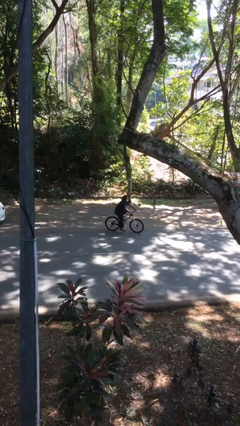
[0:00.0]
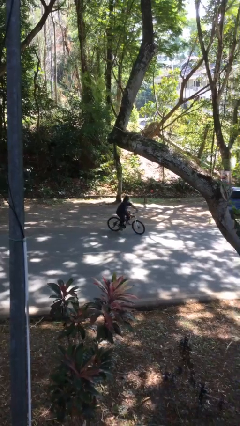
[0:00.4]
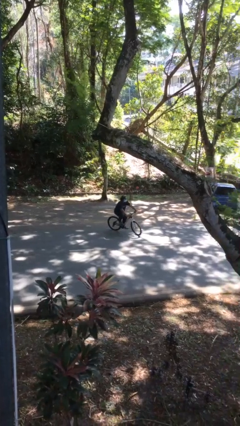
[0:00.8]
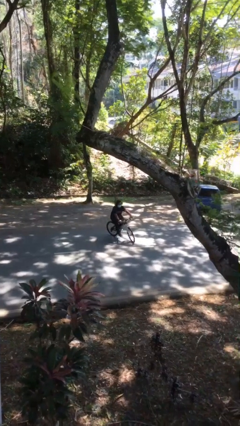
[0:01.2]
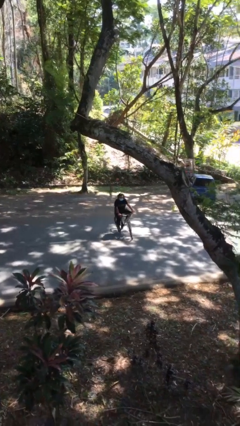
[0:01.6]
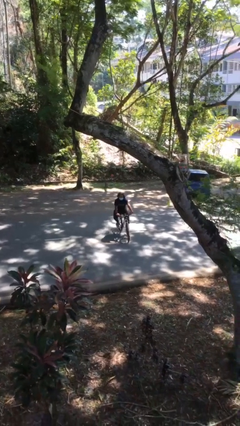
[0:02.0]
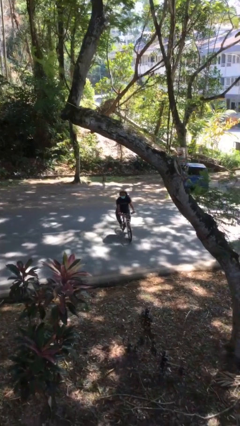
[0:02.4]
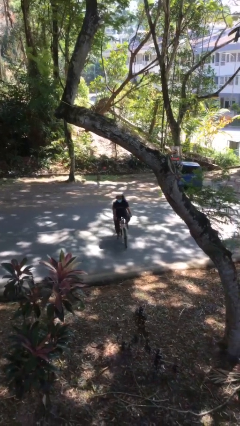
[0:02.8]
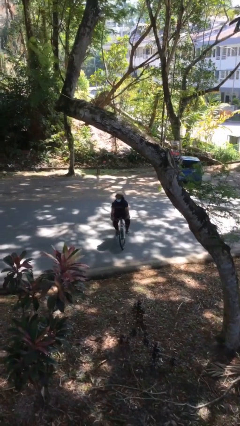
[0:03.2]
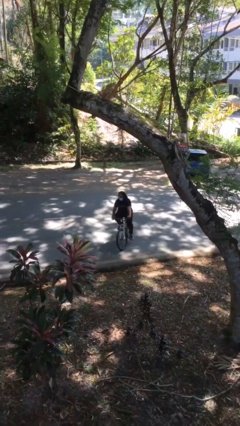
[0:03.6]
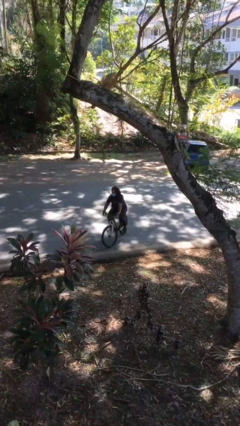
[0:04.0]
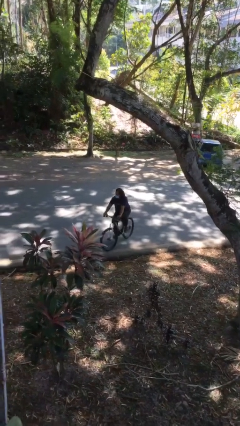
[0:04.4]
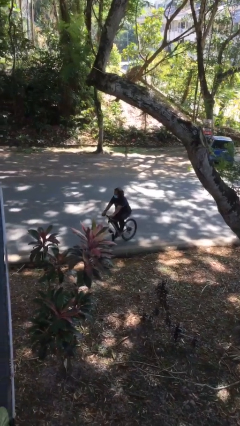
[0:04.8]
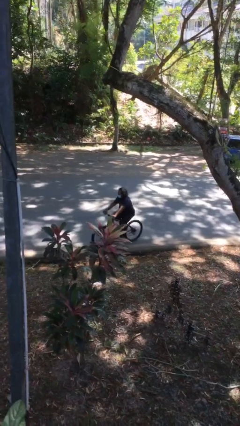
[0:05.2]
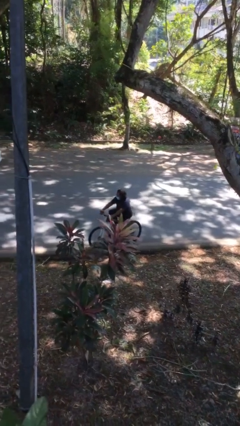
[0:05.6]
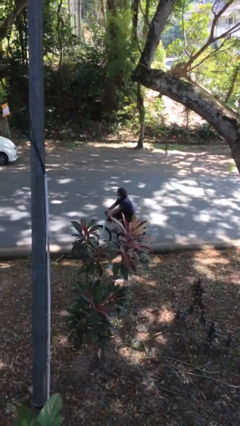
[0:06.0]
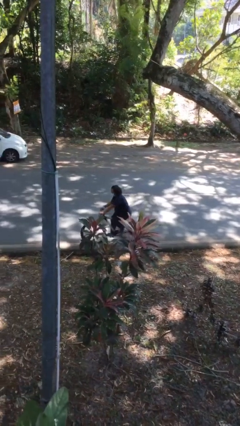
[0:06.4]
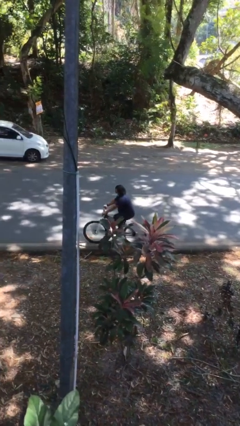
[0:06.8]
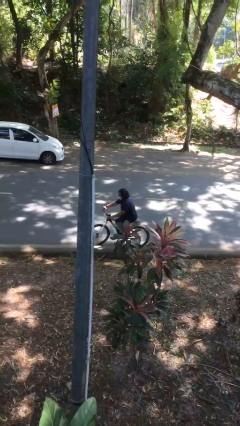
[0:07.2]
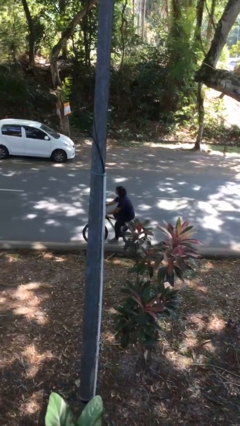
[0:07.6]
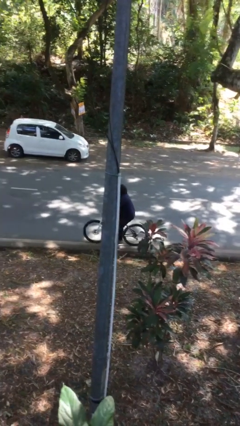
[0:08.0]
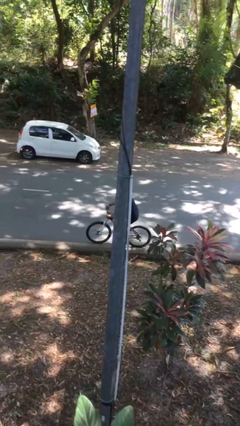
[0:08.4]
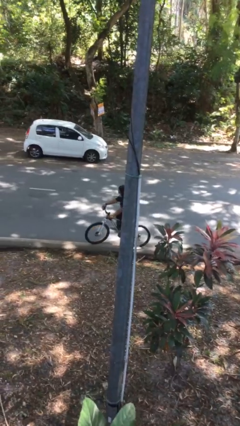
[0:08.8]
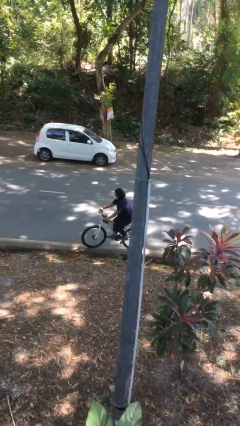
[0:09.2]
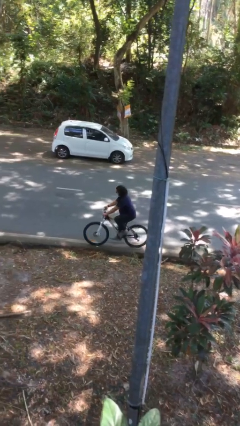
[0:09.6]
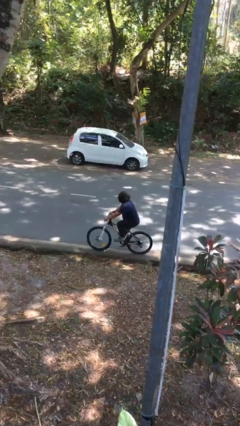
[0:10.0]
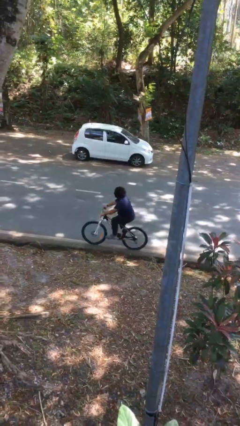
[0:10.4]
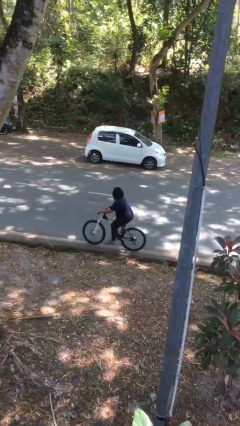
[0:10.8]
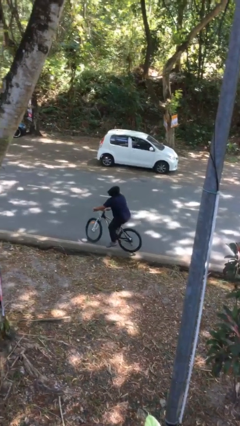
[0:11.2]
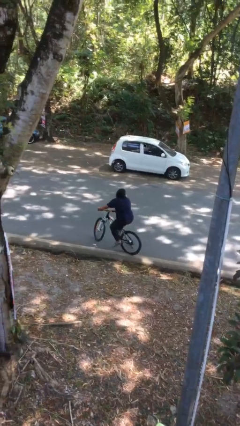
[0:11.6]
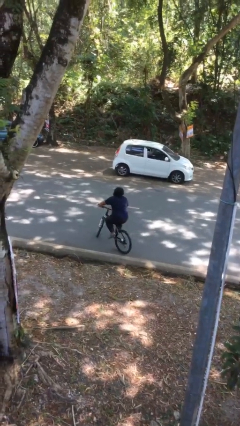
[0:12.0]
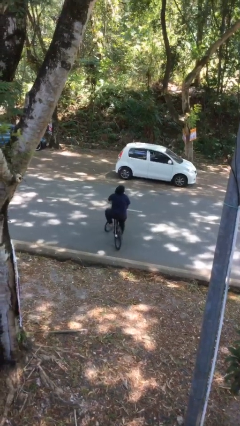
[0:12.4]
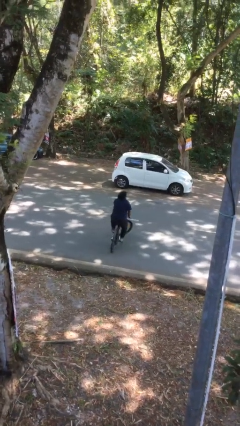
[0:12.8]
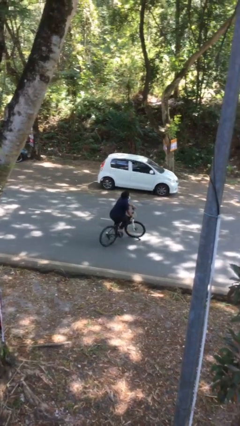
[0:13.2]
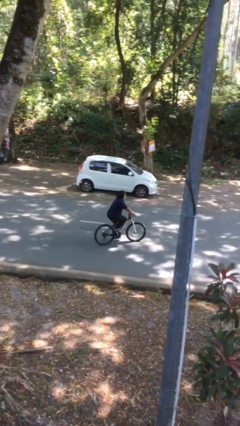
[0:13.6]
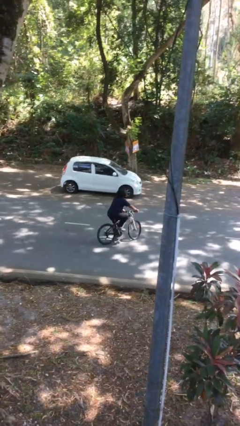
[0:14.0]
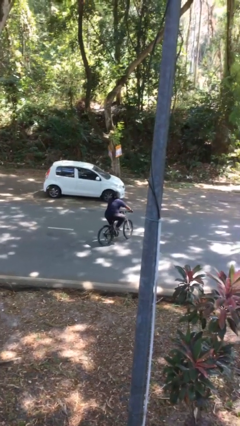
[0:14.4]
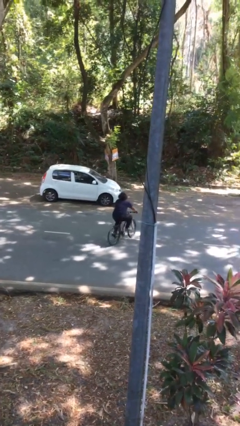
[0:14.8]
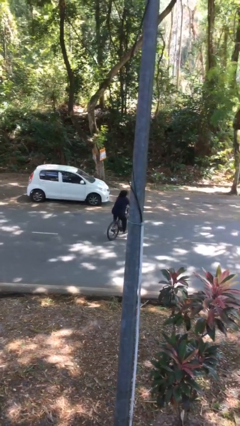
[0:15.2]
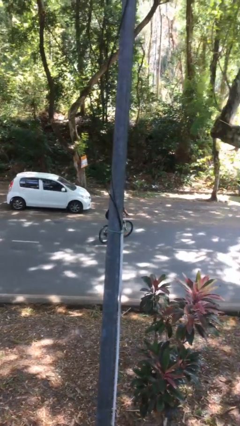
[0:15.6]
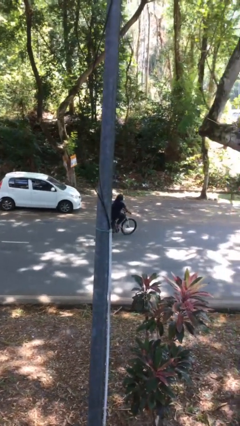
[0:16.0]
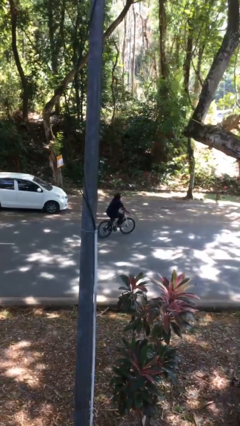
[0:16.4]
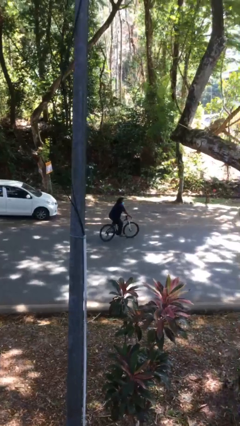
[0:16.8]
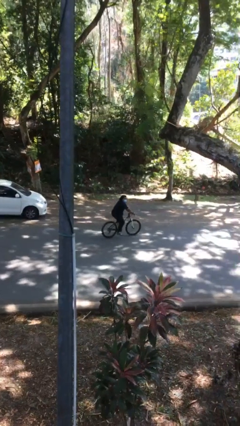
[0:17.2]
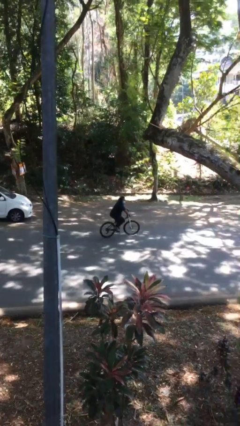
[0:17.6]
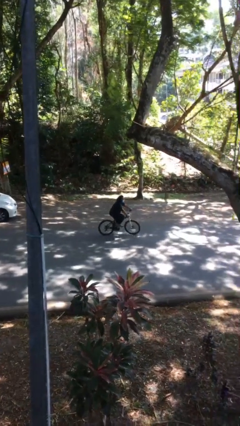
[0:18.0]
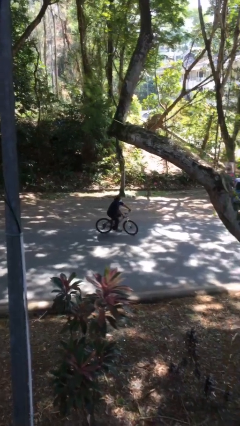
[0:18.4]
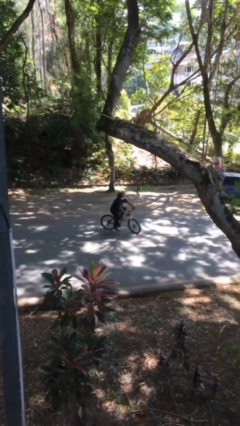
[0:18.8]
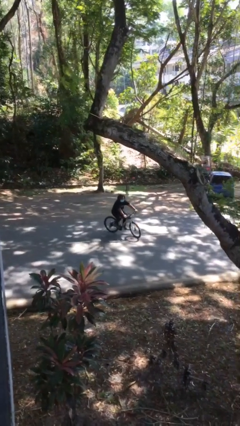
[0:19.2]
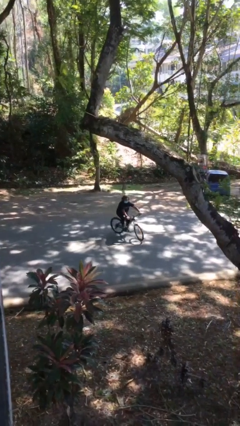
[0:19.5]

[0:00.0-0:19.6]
person rides bicycle

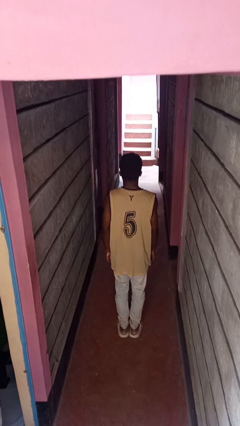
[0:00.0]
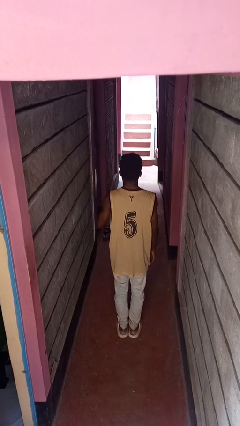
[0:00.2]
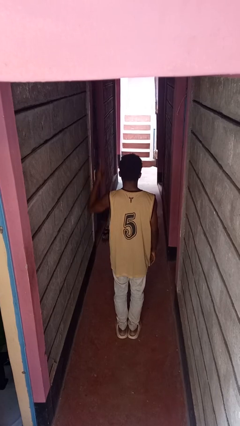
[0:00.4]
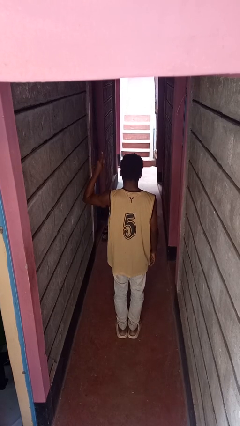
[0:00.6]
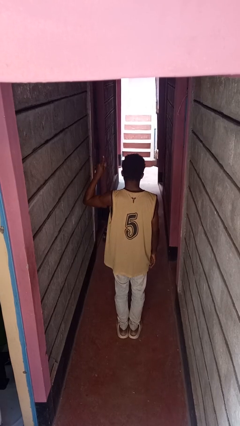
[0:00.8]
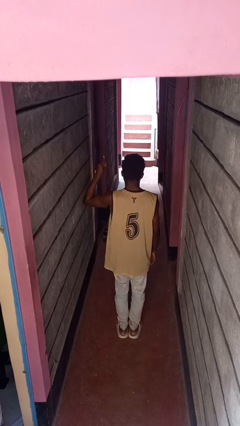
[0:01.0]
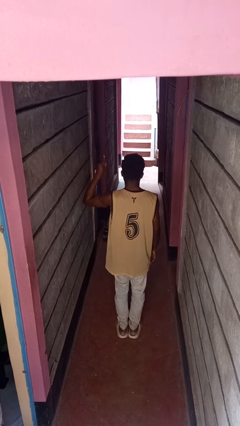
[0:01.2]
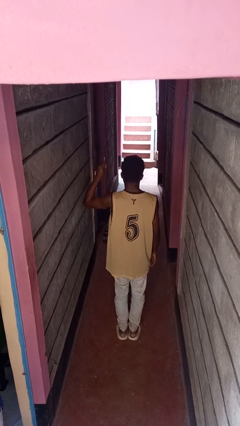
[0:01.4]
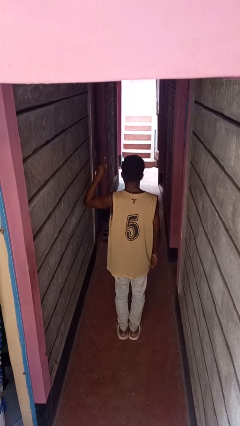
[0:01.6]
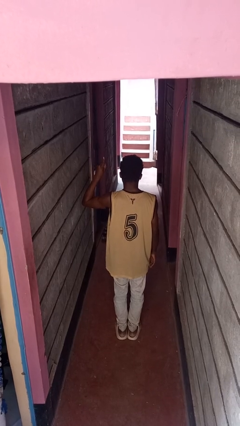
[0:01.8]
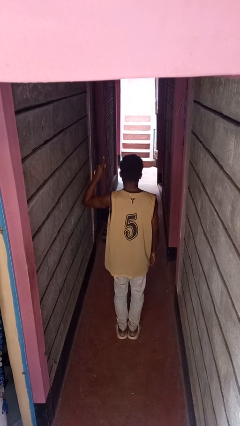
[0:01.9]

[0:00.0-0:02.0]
person gestures number one

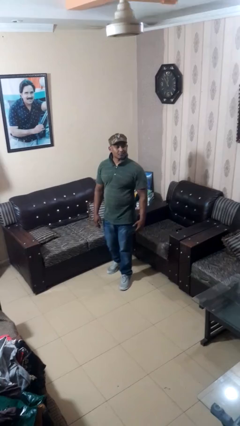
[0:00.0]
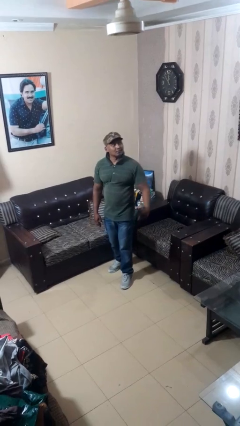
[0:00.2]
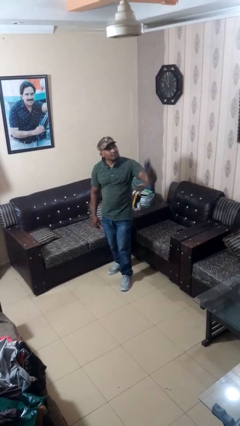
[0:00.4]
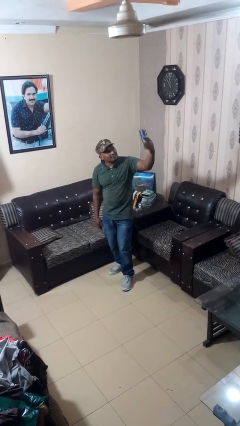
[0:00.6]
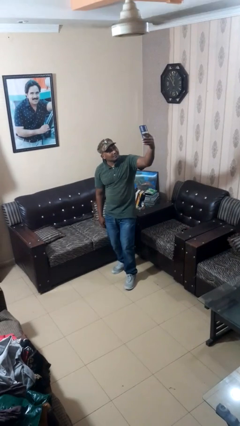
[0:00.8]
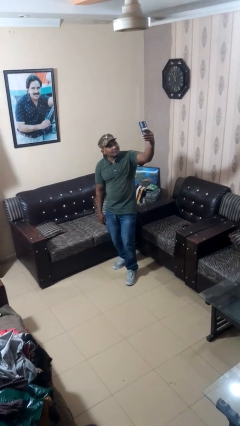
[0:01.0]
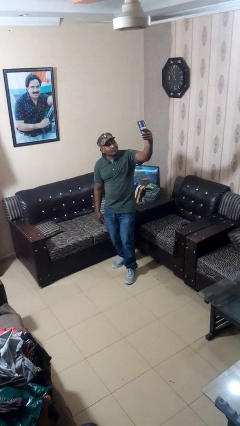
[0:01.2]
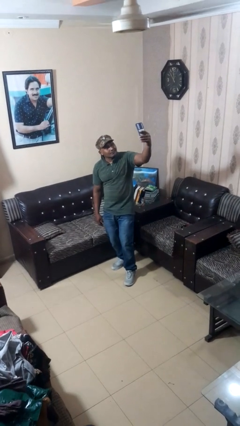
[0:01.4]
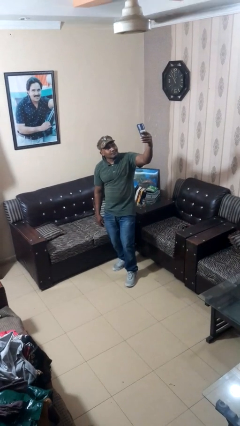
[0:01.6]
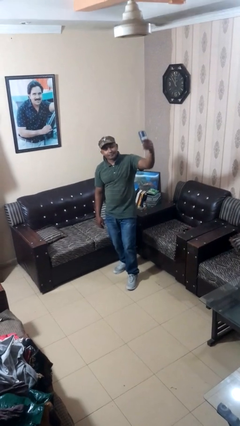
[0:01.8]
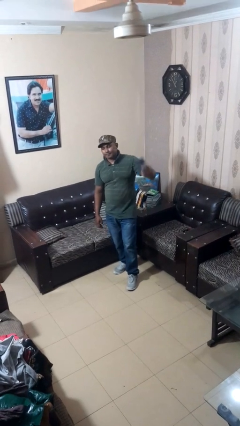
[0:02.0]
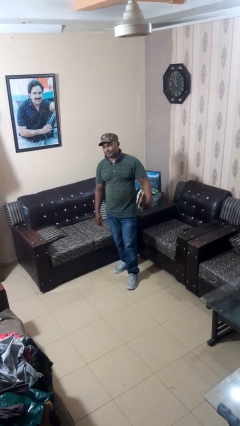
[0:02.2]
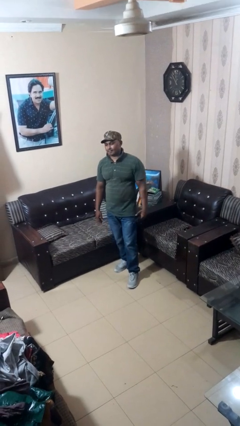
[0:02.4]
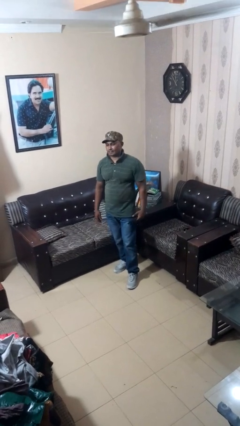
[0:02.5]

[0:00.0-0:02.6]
person takes selfie

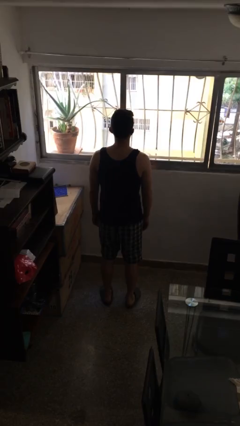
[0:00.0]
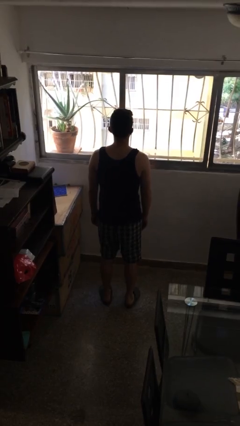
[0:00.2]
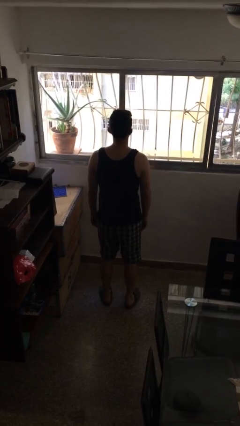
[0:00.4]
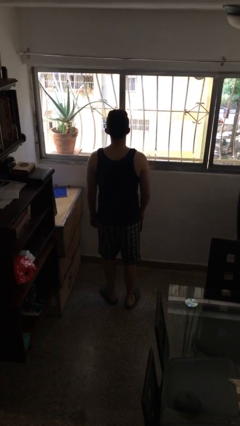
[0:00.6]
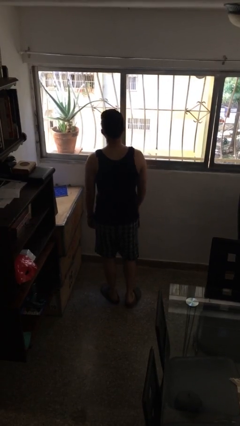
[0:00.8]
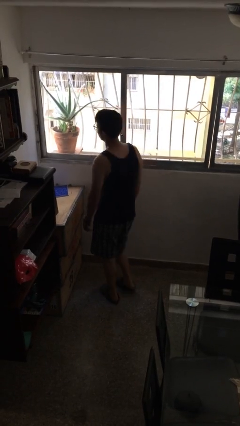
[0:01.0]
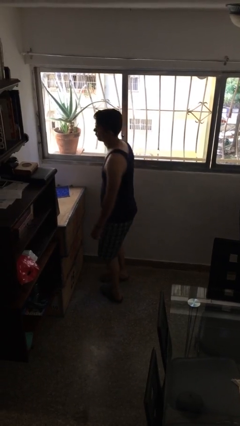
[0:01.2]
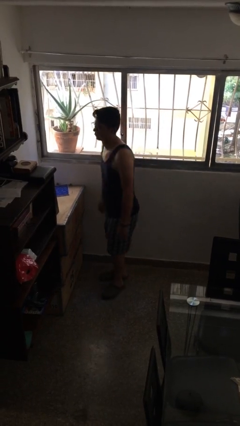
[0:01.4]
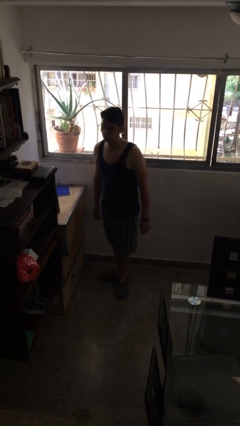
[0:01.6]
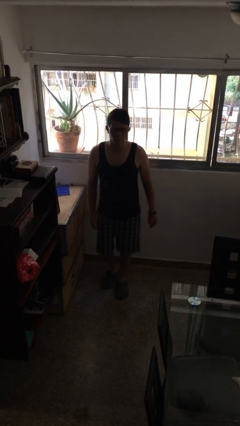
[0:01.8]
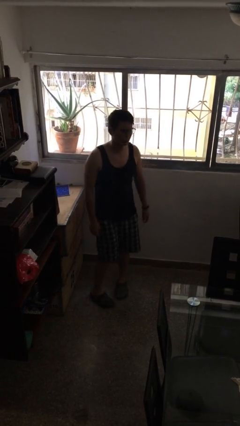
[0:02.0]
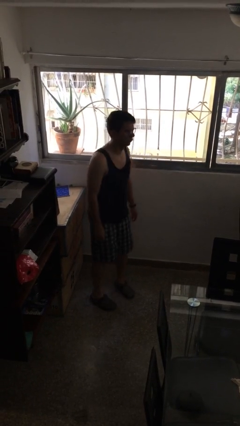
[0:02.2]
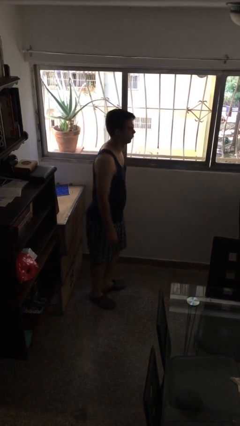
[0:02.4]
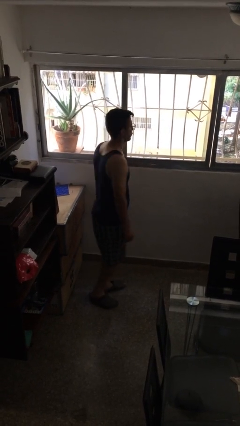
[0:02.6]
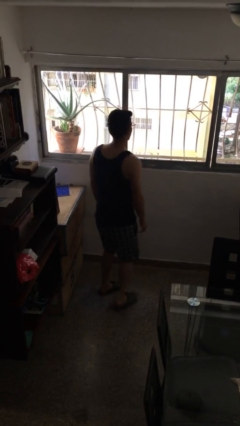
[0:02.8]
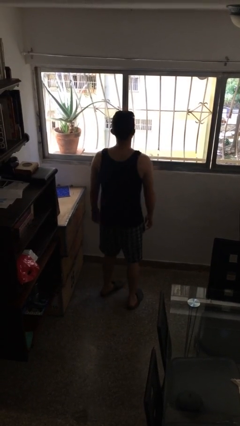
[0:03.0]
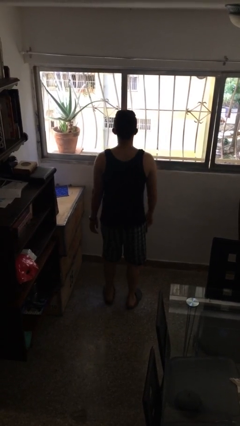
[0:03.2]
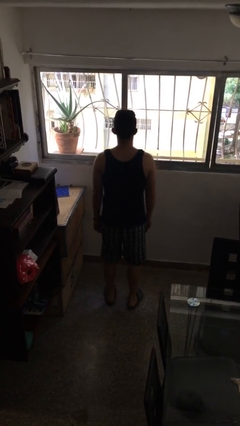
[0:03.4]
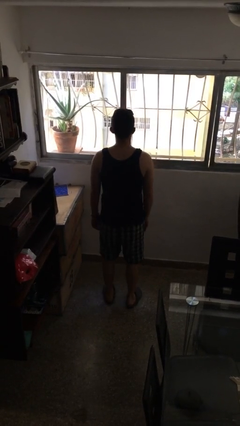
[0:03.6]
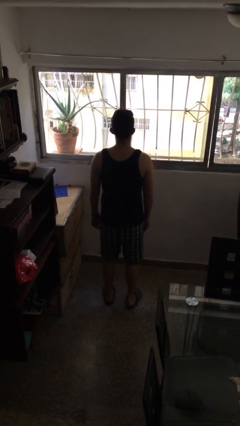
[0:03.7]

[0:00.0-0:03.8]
person twirls
